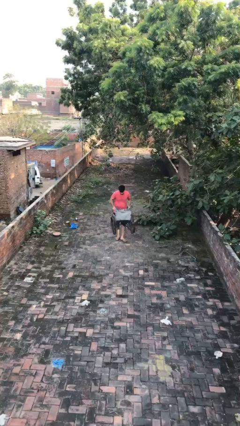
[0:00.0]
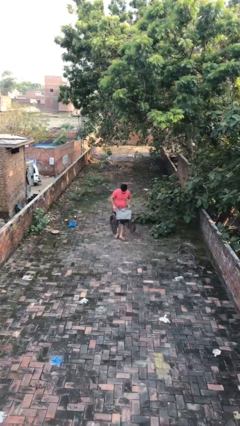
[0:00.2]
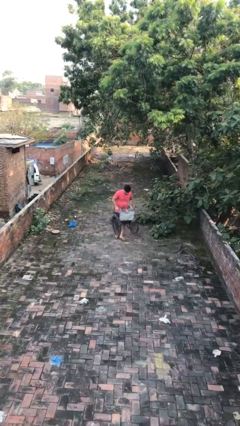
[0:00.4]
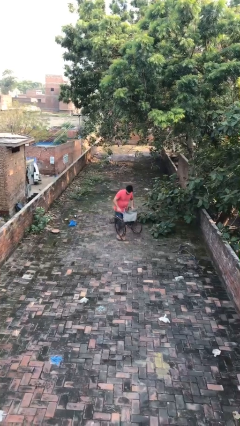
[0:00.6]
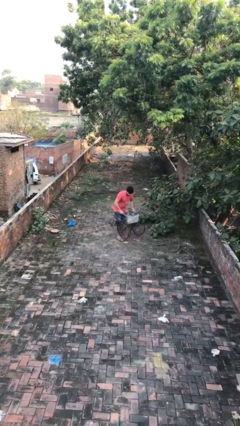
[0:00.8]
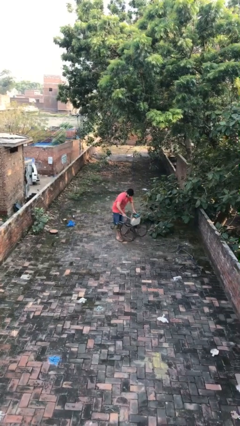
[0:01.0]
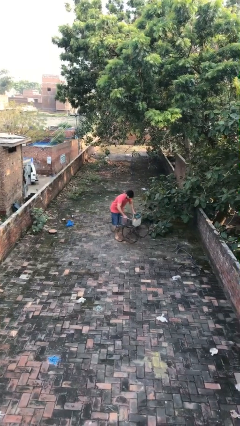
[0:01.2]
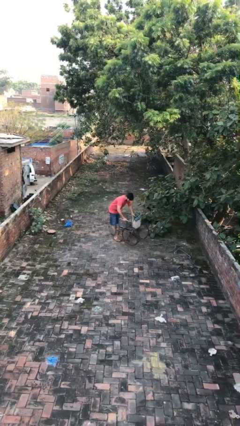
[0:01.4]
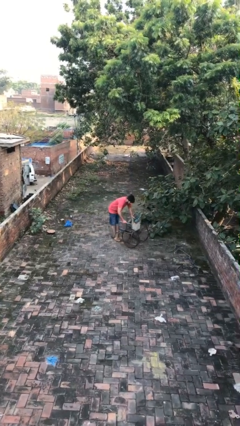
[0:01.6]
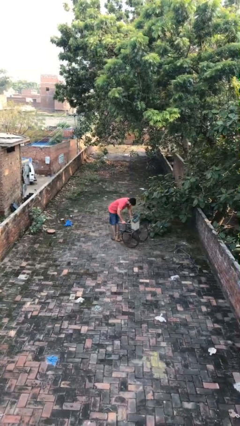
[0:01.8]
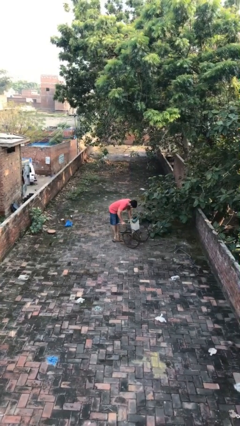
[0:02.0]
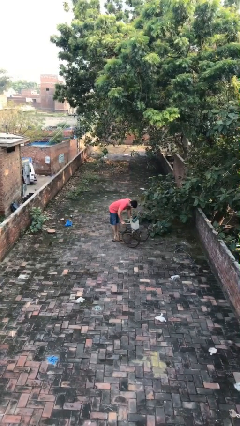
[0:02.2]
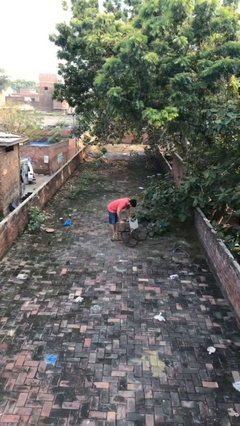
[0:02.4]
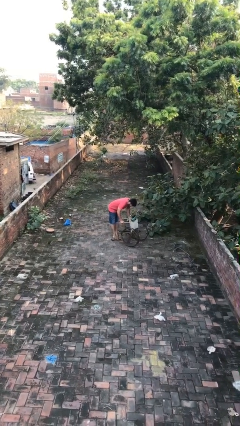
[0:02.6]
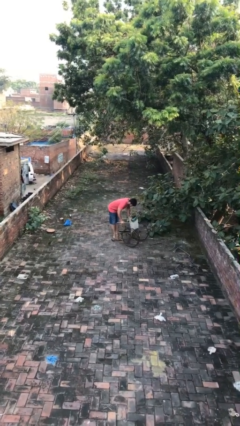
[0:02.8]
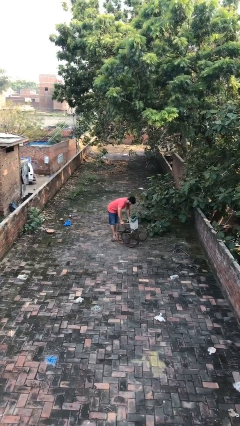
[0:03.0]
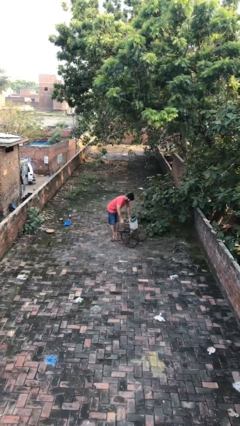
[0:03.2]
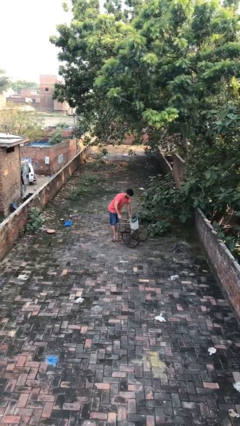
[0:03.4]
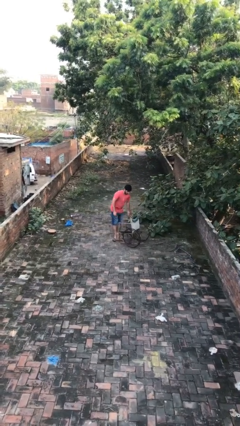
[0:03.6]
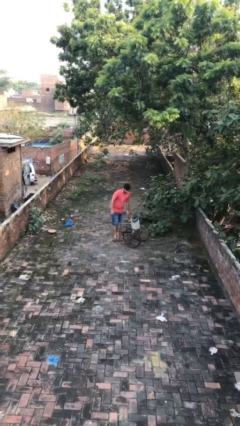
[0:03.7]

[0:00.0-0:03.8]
person puts down object on floor

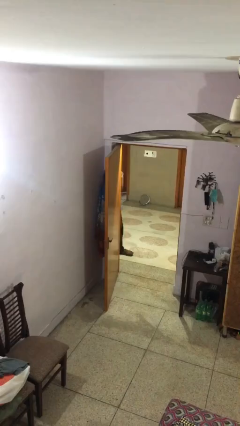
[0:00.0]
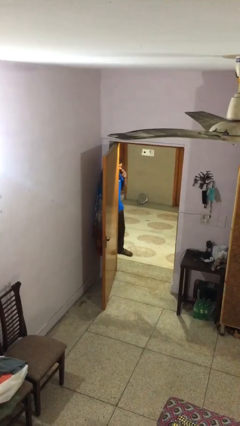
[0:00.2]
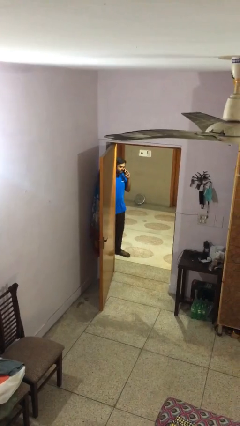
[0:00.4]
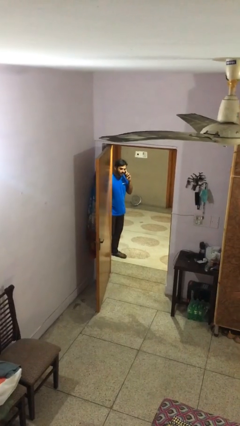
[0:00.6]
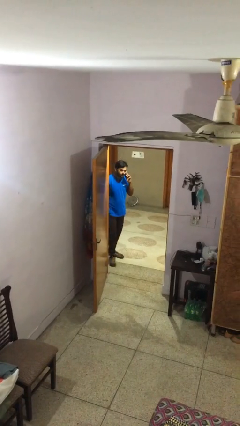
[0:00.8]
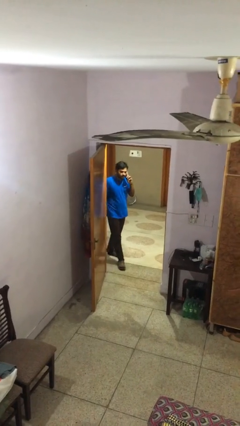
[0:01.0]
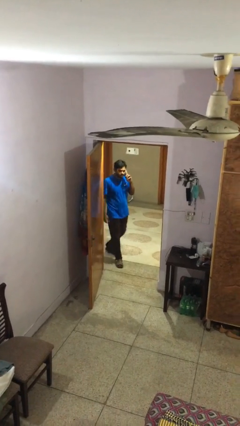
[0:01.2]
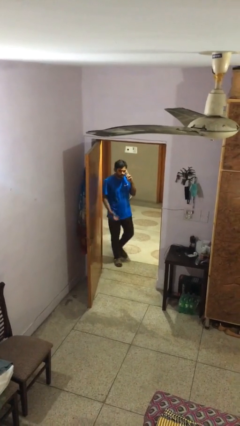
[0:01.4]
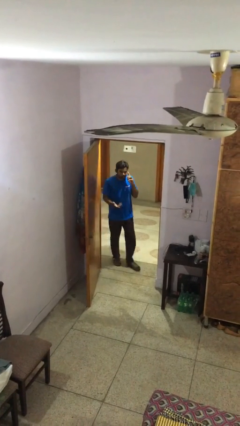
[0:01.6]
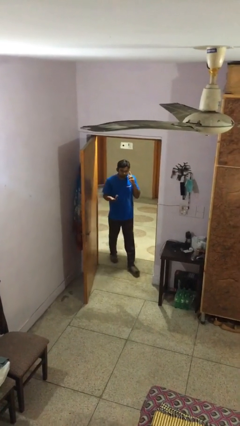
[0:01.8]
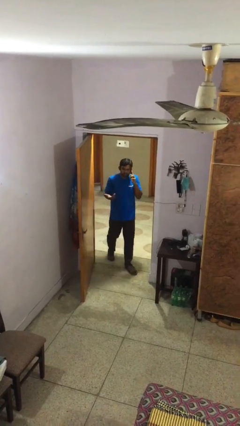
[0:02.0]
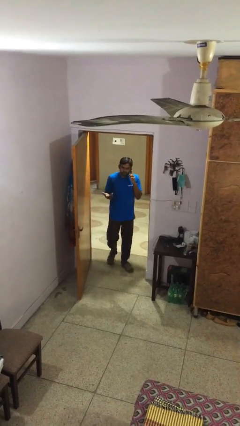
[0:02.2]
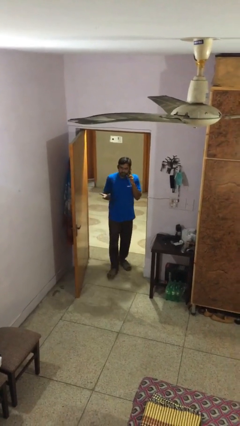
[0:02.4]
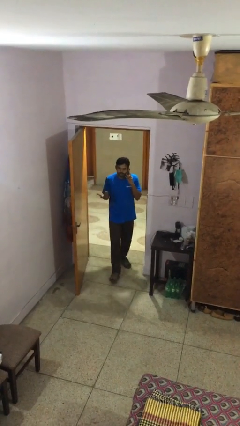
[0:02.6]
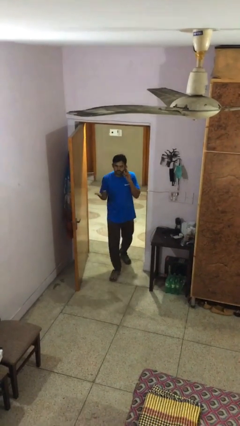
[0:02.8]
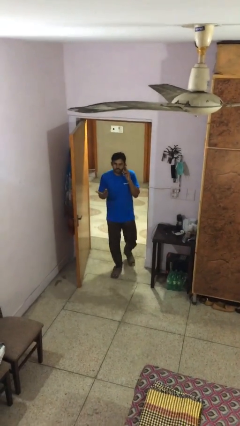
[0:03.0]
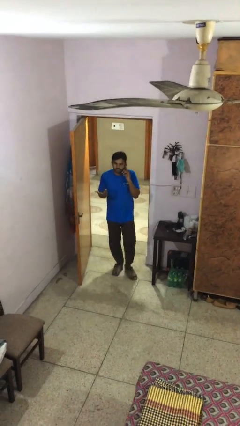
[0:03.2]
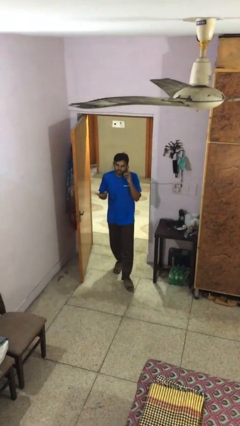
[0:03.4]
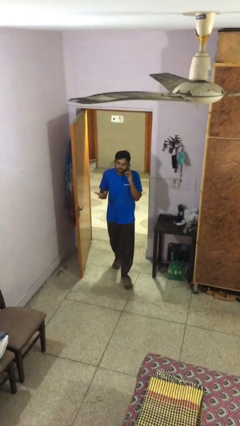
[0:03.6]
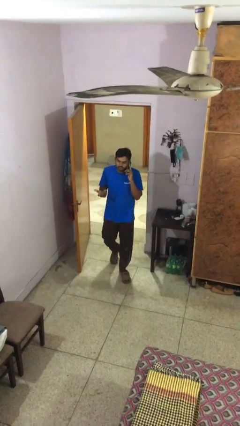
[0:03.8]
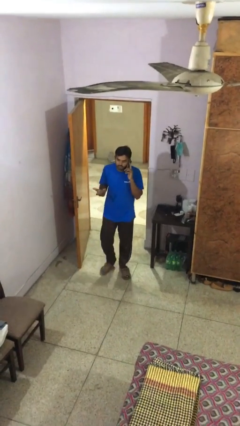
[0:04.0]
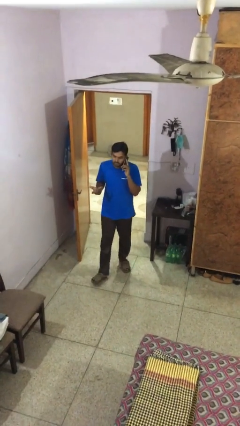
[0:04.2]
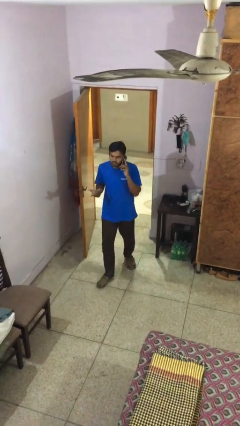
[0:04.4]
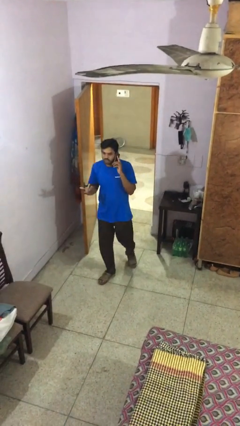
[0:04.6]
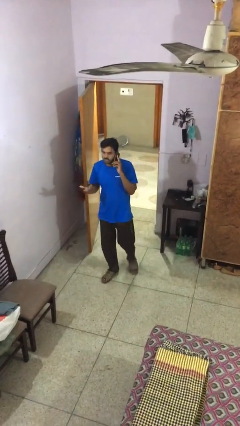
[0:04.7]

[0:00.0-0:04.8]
person enters scene through structure

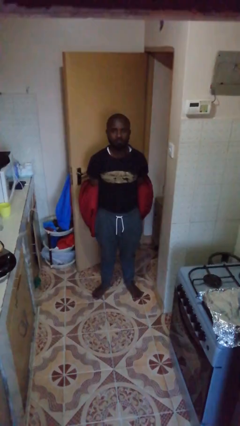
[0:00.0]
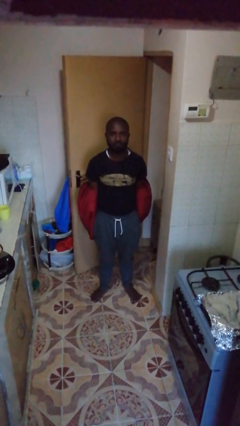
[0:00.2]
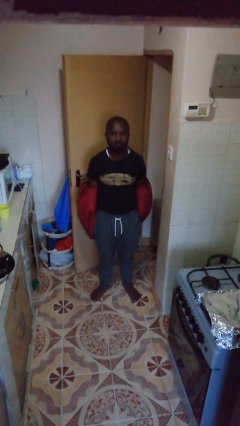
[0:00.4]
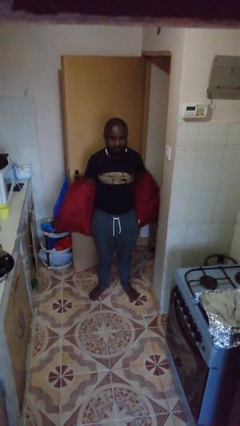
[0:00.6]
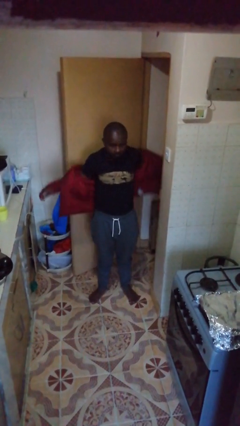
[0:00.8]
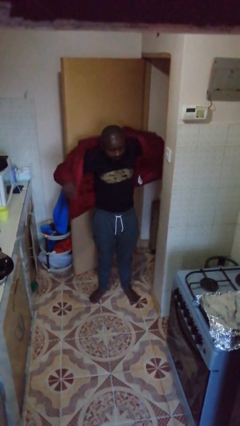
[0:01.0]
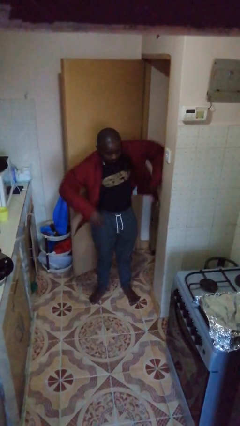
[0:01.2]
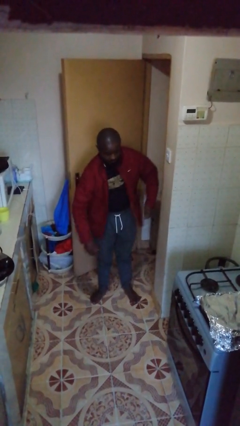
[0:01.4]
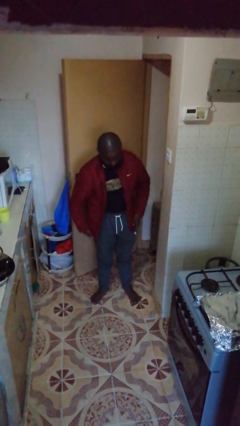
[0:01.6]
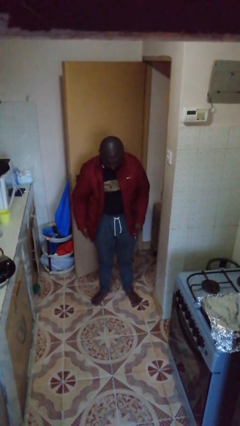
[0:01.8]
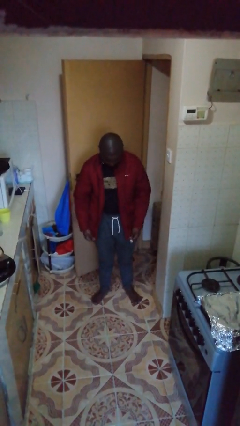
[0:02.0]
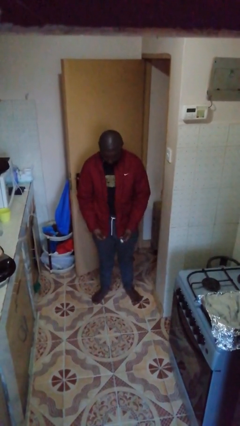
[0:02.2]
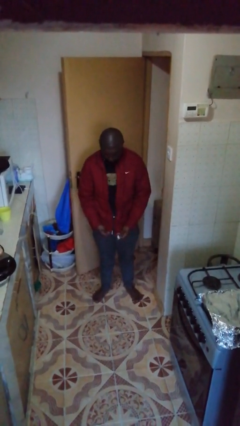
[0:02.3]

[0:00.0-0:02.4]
person puts on jacket

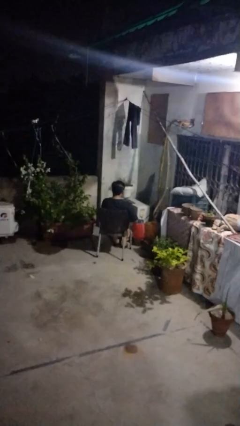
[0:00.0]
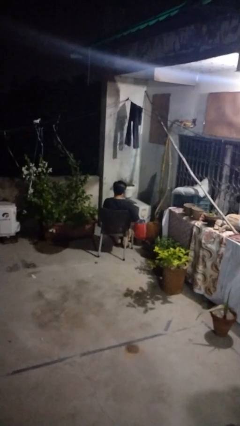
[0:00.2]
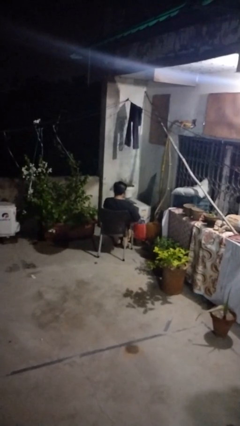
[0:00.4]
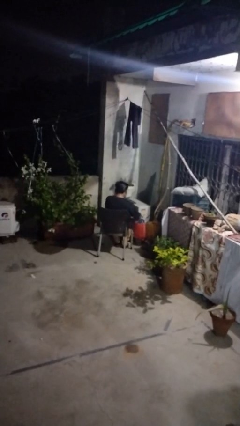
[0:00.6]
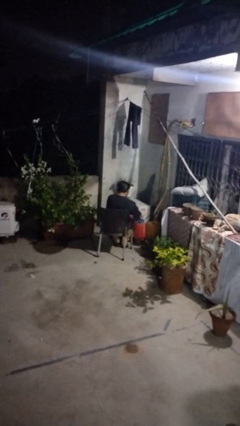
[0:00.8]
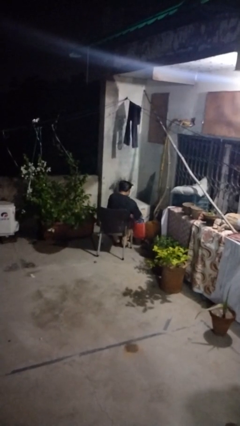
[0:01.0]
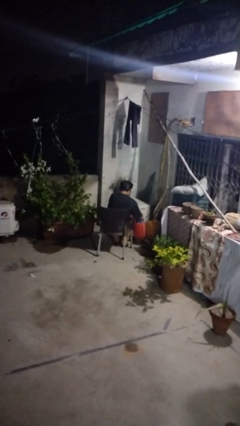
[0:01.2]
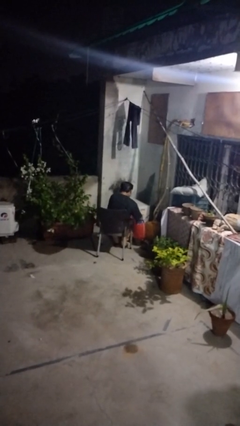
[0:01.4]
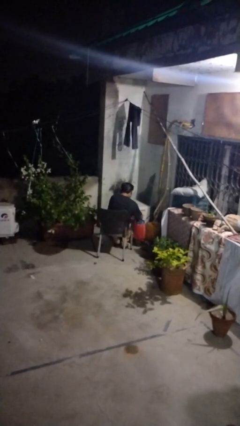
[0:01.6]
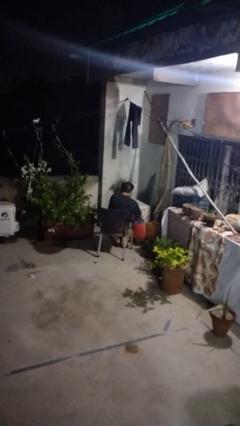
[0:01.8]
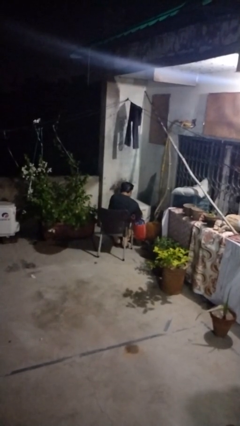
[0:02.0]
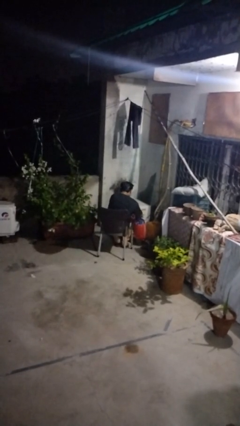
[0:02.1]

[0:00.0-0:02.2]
person searches in bag

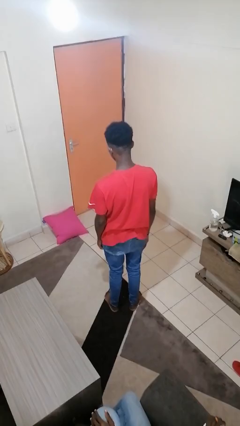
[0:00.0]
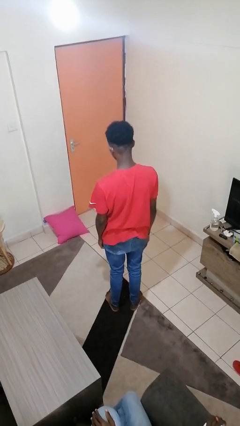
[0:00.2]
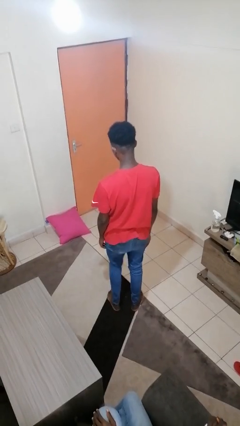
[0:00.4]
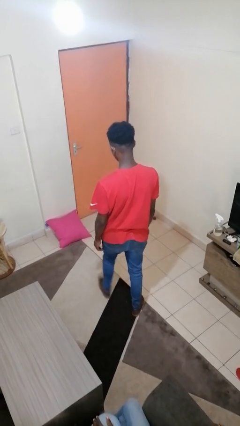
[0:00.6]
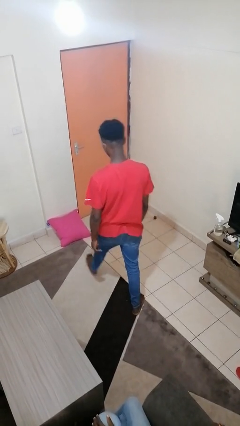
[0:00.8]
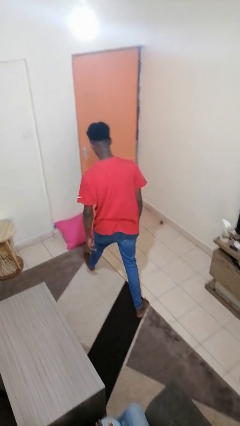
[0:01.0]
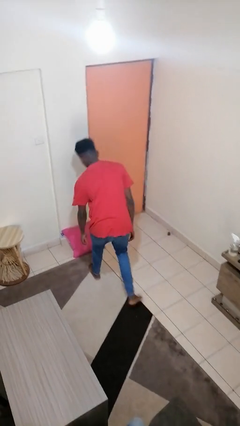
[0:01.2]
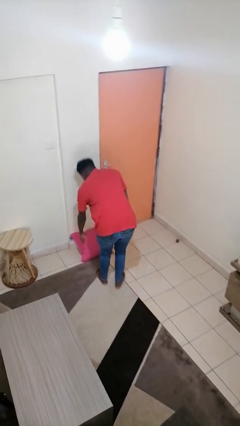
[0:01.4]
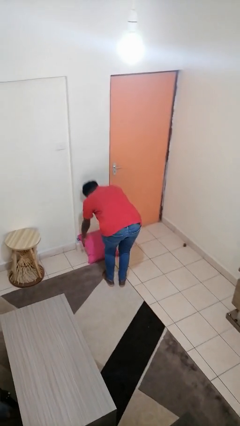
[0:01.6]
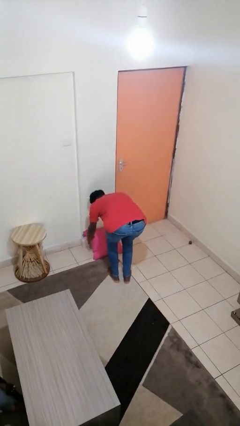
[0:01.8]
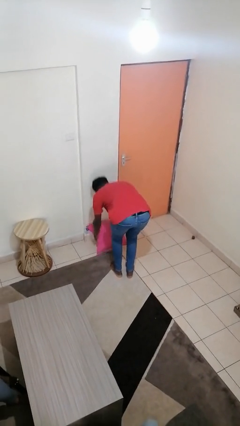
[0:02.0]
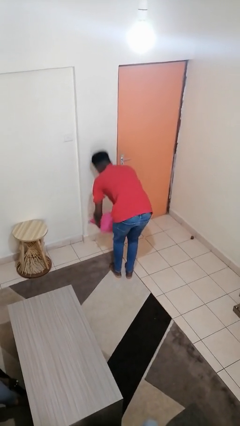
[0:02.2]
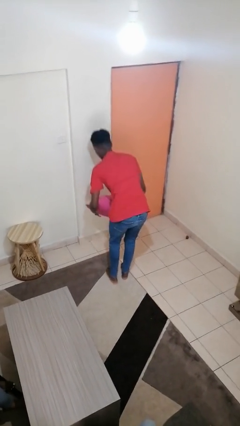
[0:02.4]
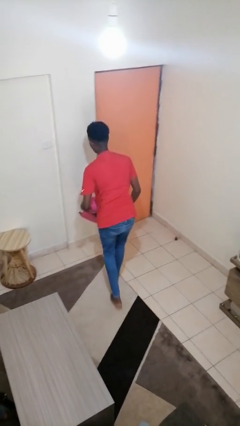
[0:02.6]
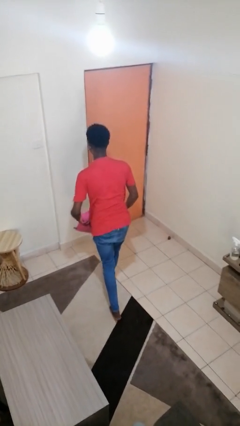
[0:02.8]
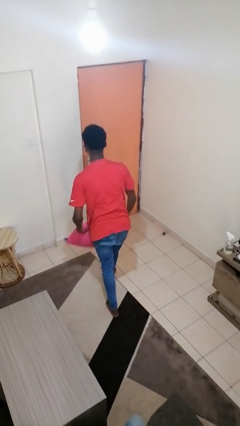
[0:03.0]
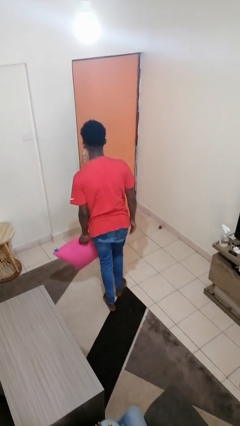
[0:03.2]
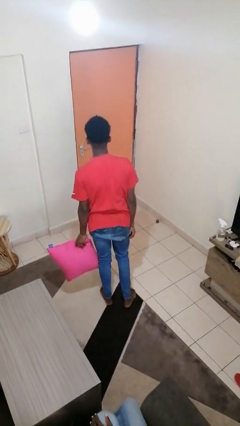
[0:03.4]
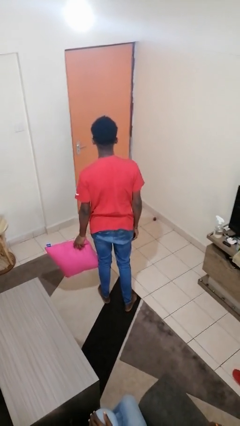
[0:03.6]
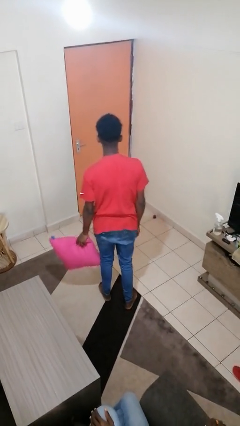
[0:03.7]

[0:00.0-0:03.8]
person picks up object from floor

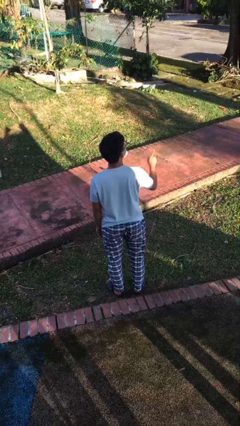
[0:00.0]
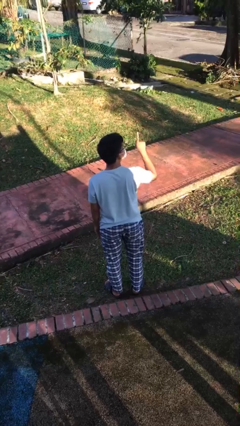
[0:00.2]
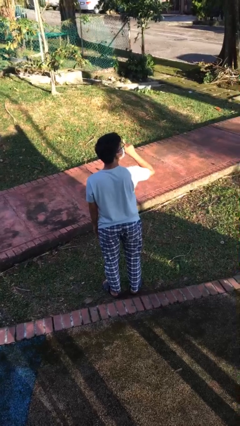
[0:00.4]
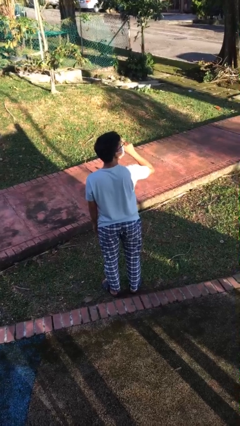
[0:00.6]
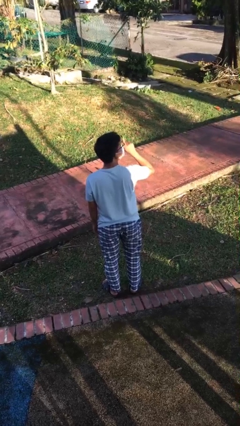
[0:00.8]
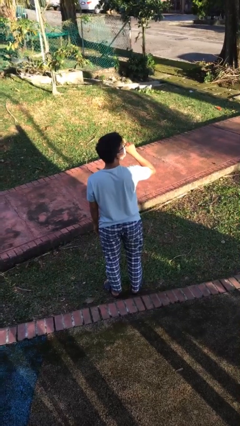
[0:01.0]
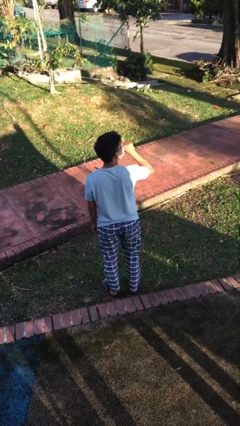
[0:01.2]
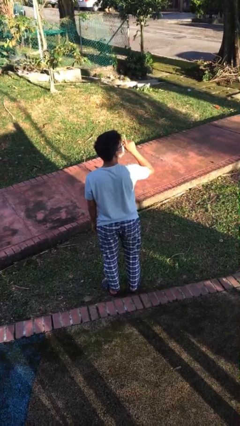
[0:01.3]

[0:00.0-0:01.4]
person gestures be quiet
